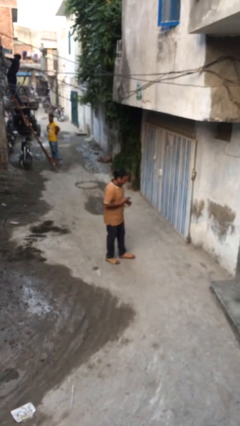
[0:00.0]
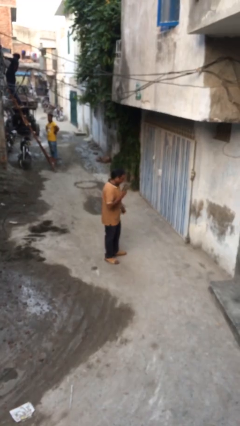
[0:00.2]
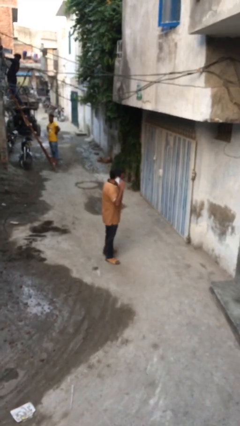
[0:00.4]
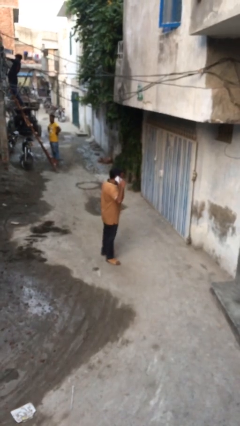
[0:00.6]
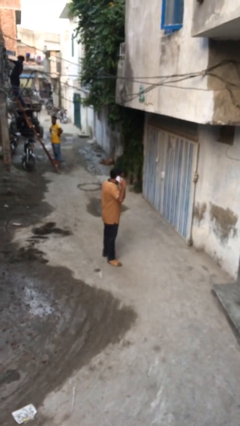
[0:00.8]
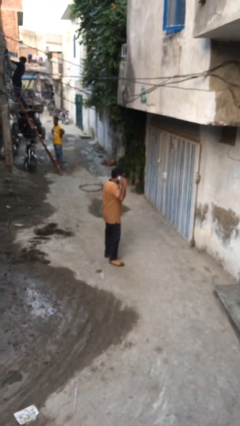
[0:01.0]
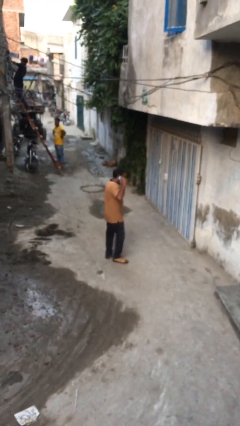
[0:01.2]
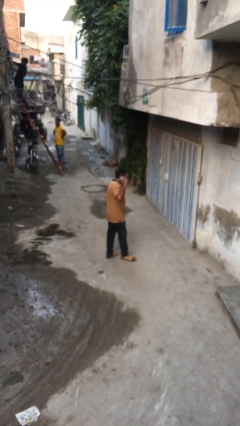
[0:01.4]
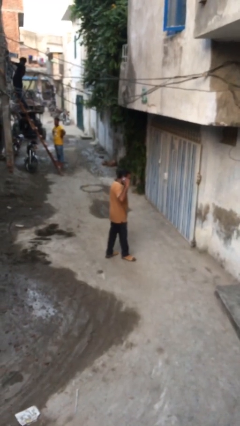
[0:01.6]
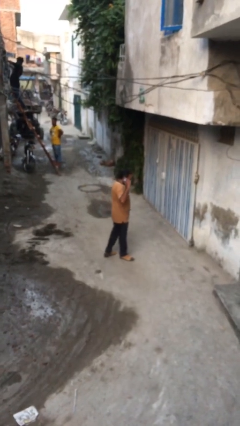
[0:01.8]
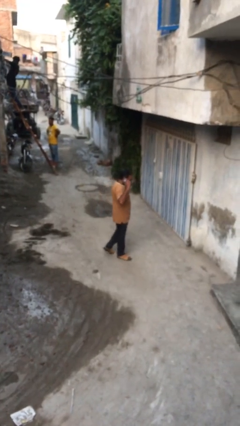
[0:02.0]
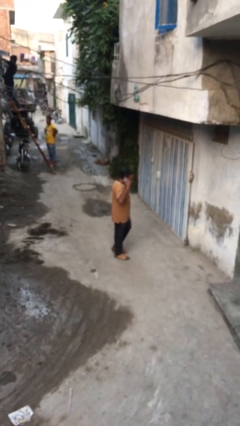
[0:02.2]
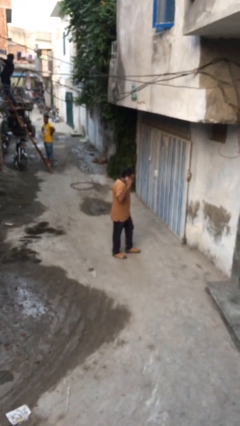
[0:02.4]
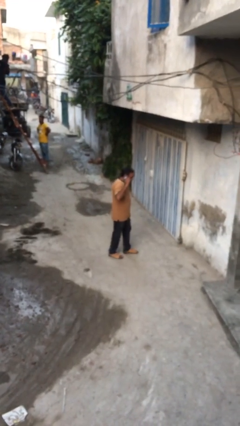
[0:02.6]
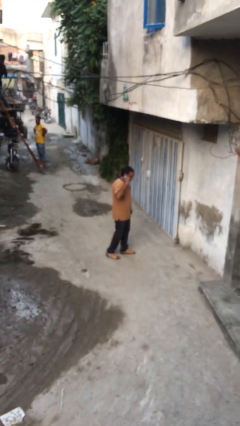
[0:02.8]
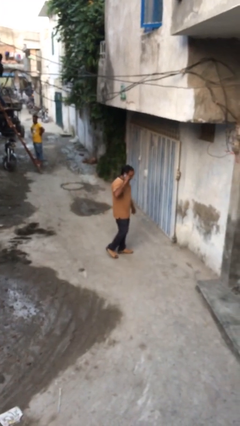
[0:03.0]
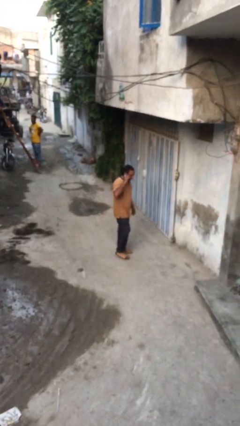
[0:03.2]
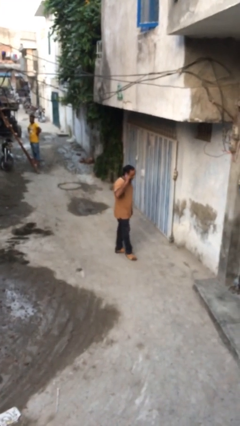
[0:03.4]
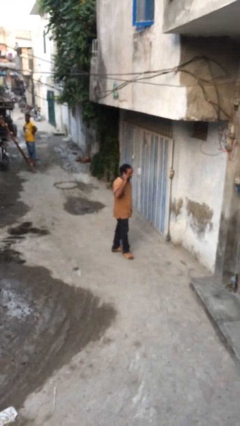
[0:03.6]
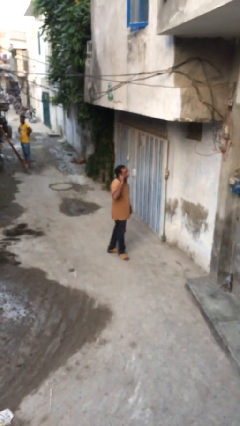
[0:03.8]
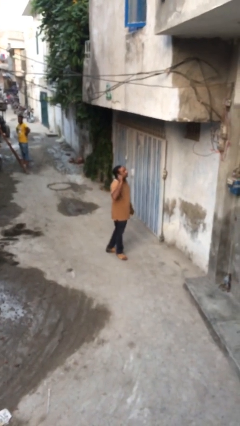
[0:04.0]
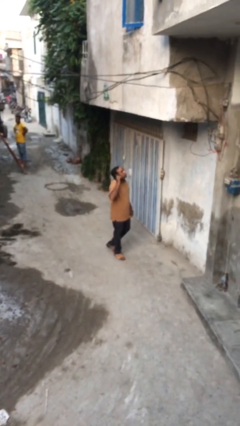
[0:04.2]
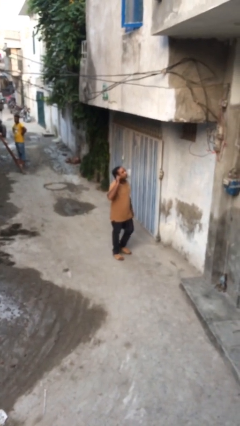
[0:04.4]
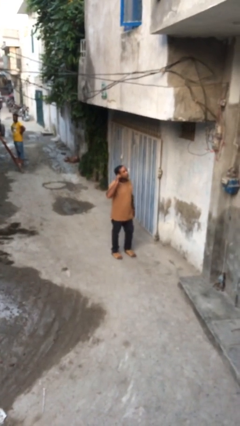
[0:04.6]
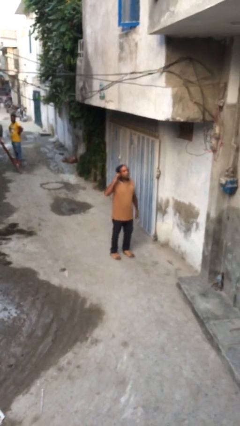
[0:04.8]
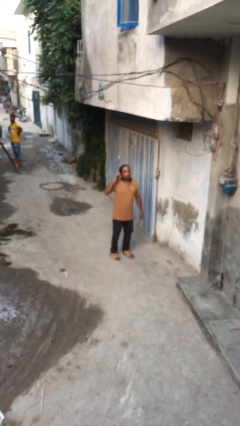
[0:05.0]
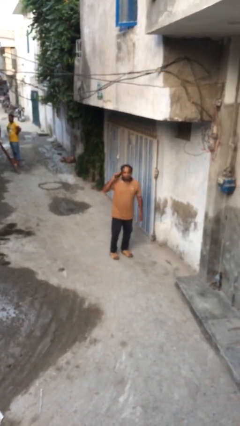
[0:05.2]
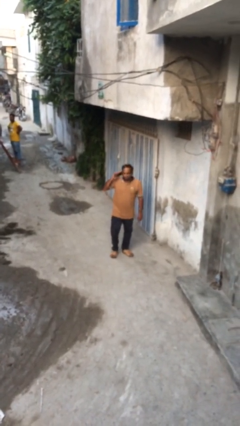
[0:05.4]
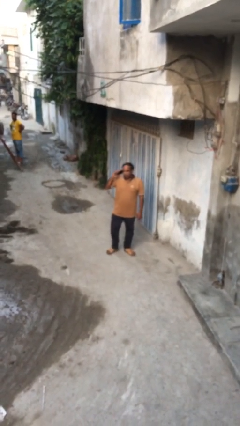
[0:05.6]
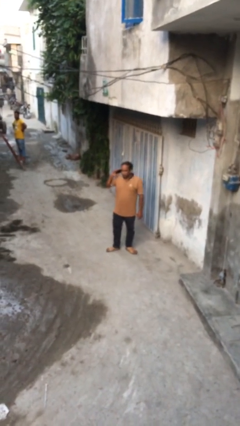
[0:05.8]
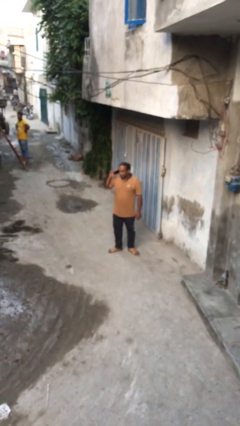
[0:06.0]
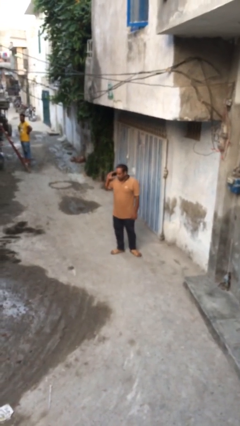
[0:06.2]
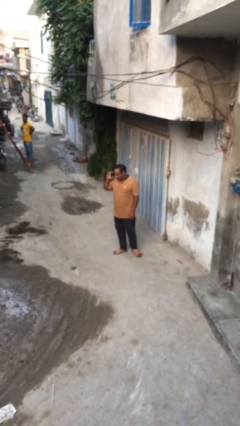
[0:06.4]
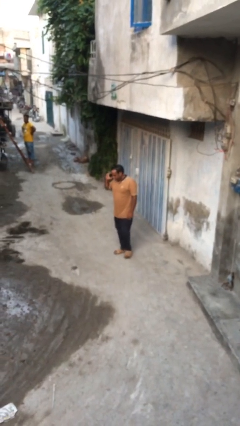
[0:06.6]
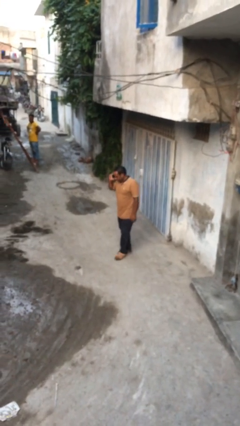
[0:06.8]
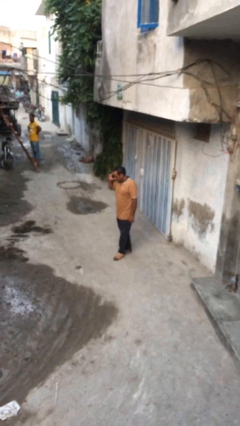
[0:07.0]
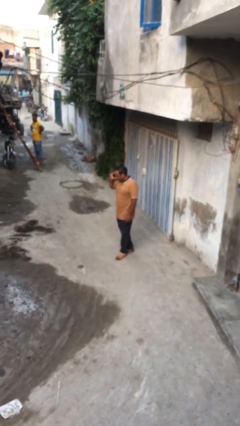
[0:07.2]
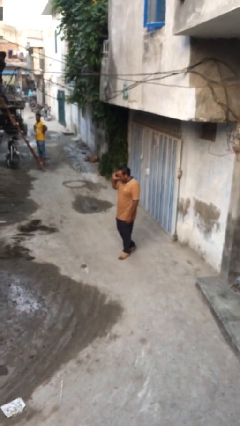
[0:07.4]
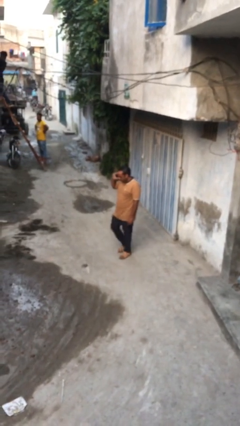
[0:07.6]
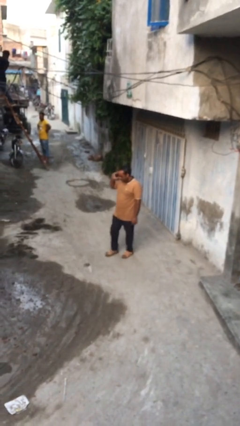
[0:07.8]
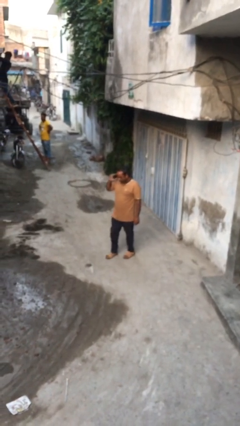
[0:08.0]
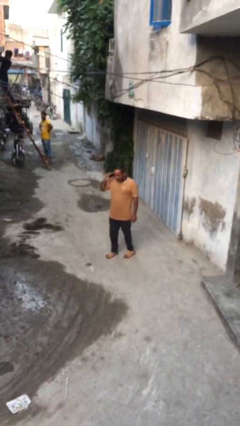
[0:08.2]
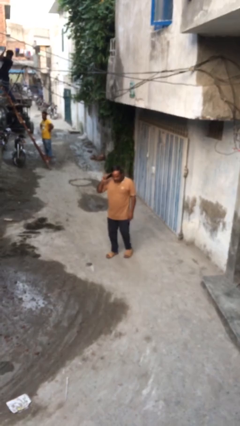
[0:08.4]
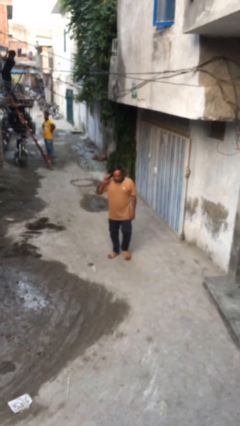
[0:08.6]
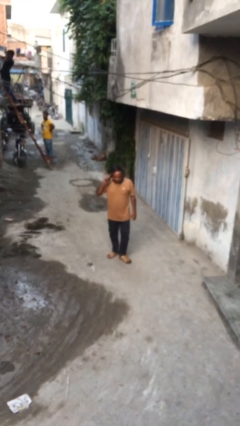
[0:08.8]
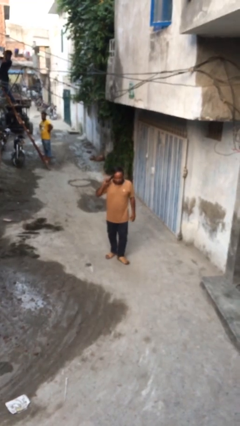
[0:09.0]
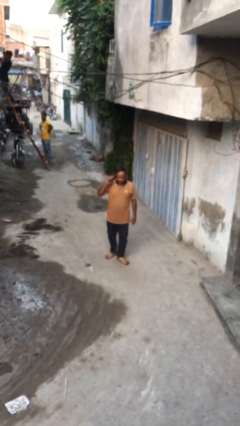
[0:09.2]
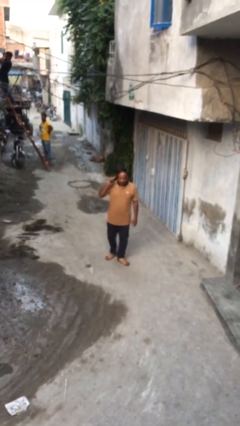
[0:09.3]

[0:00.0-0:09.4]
person talks on phone

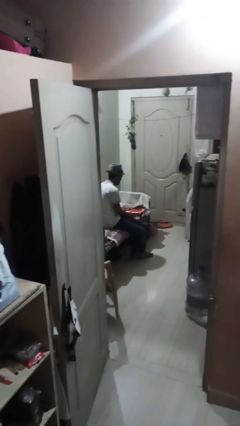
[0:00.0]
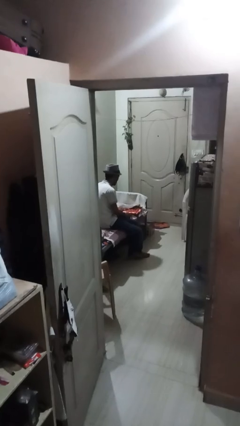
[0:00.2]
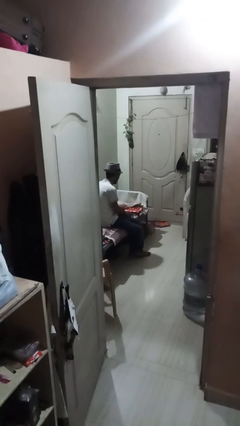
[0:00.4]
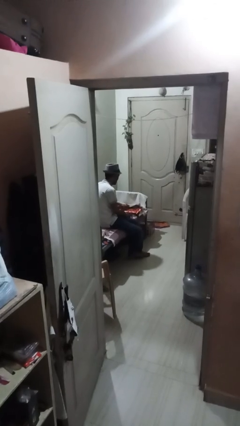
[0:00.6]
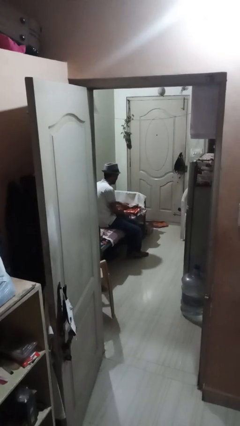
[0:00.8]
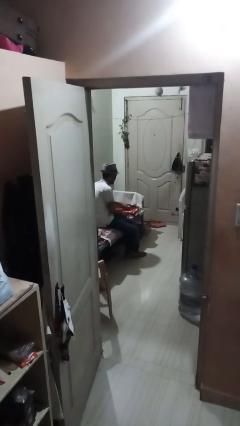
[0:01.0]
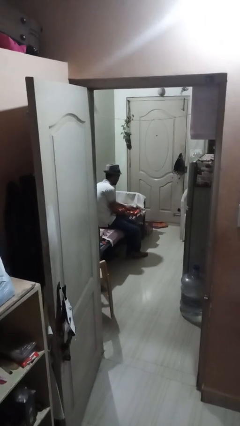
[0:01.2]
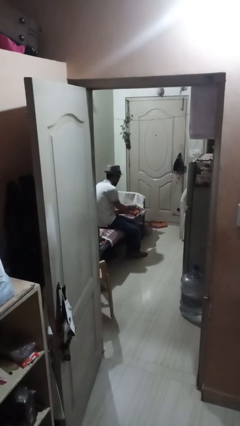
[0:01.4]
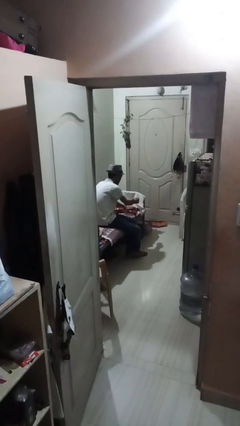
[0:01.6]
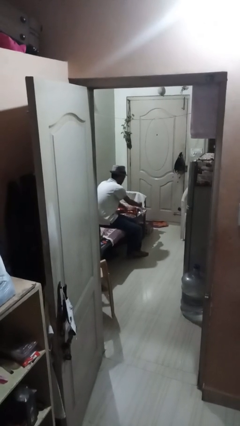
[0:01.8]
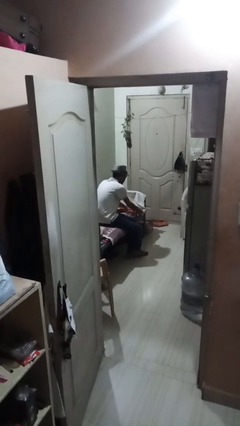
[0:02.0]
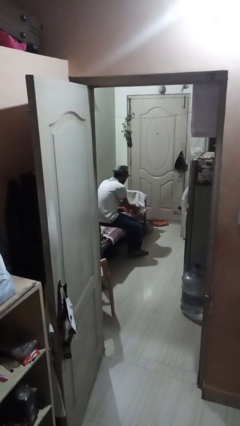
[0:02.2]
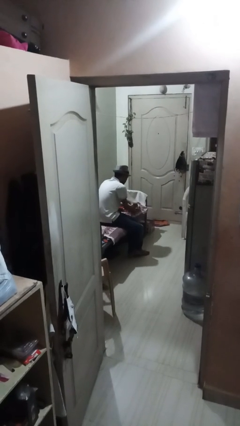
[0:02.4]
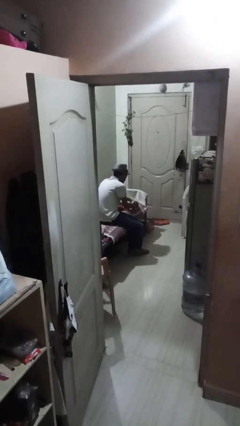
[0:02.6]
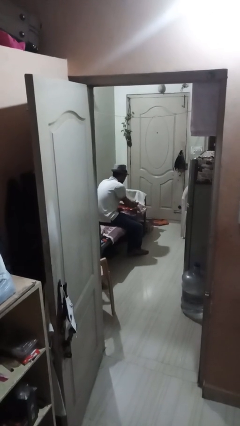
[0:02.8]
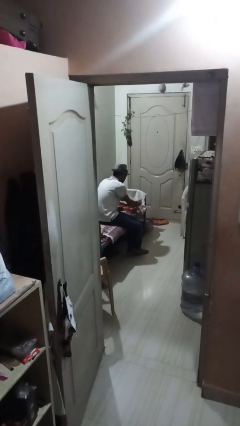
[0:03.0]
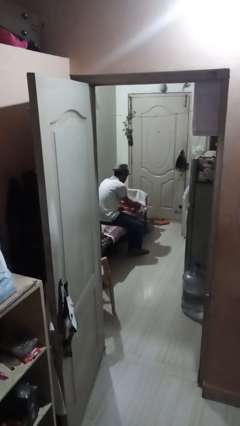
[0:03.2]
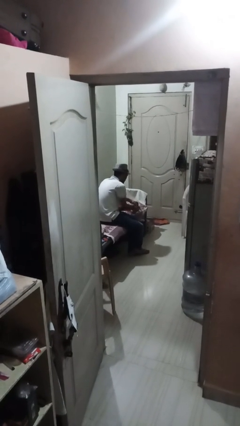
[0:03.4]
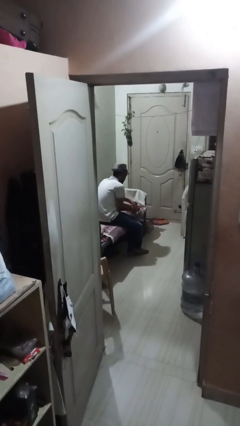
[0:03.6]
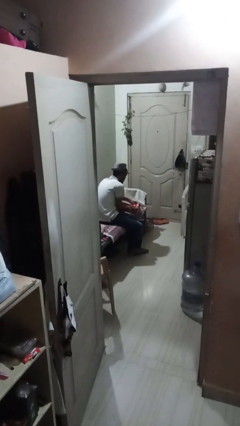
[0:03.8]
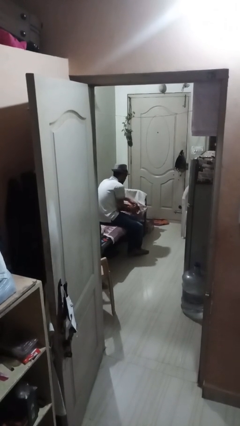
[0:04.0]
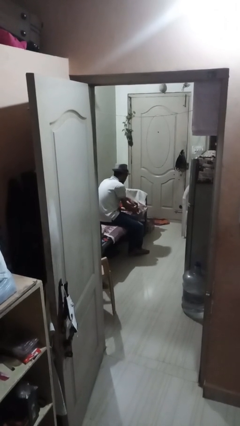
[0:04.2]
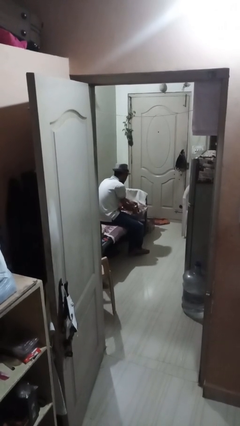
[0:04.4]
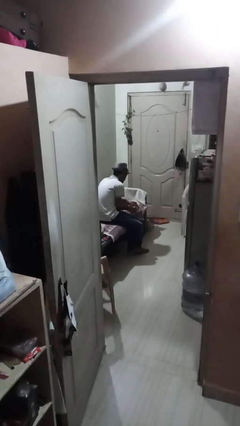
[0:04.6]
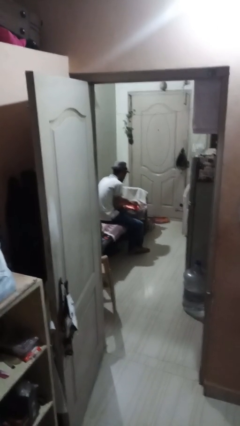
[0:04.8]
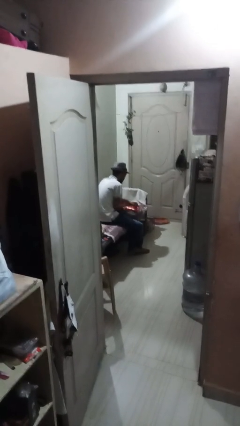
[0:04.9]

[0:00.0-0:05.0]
person wraps box

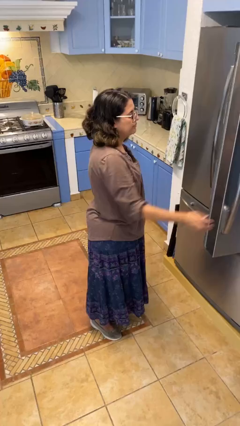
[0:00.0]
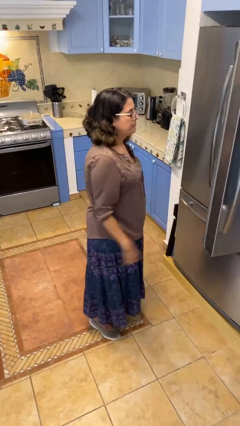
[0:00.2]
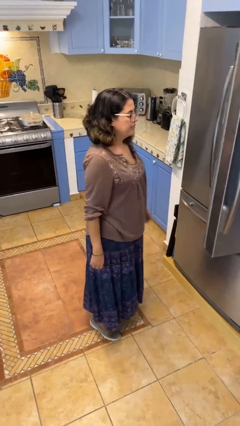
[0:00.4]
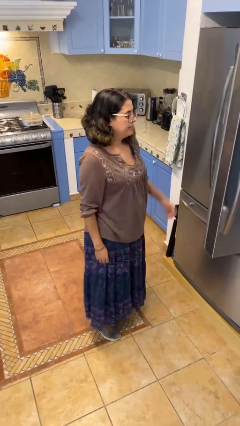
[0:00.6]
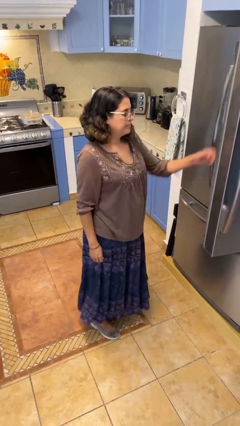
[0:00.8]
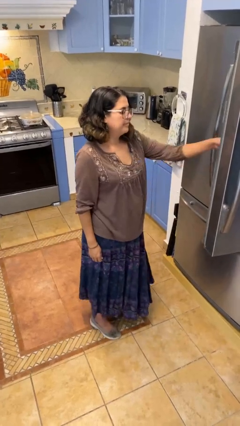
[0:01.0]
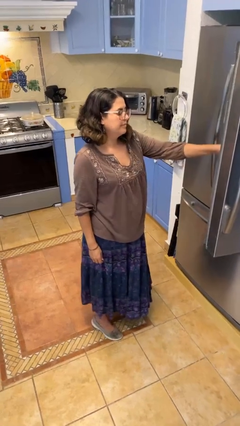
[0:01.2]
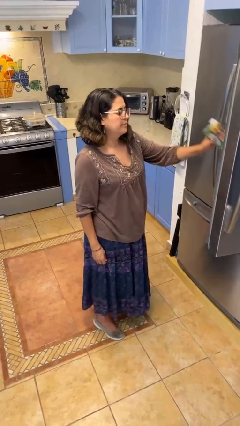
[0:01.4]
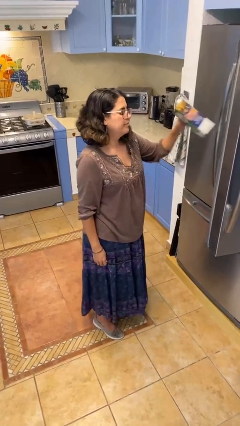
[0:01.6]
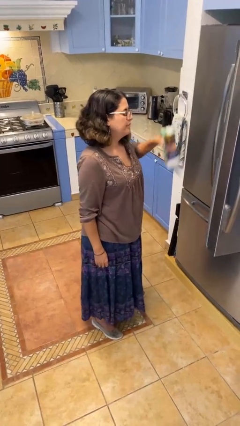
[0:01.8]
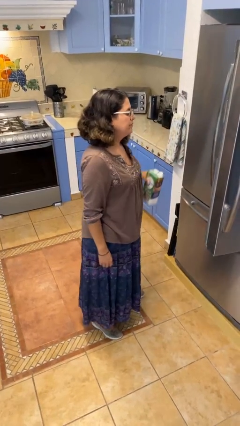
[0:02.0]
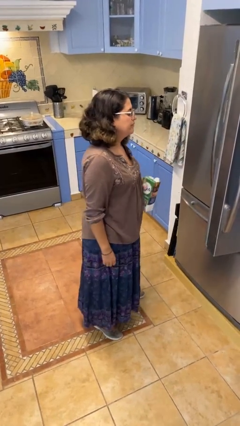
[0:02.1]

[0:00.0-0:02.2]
person takes object from refrigerator

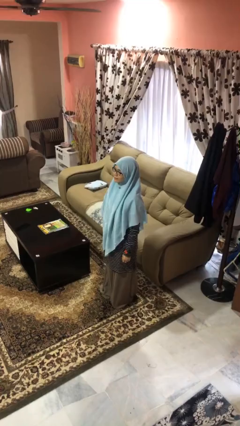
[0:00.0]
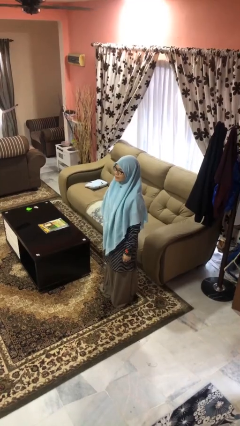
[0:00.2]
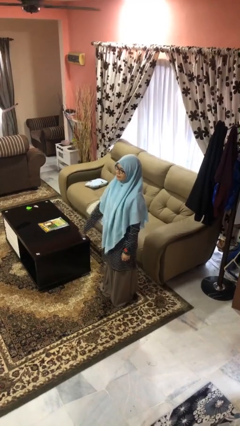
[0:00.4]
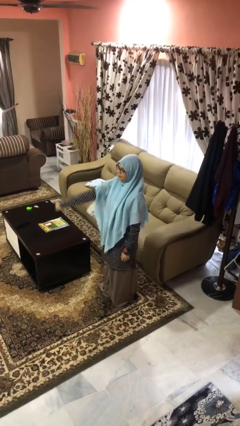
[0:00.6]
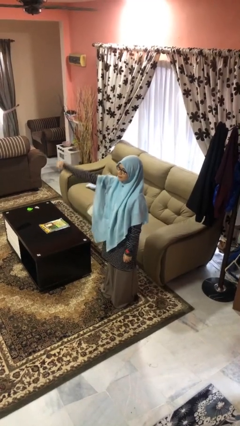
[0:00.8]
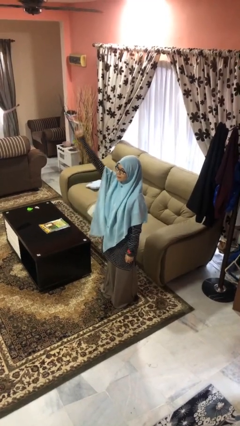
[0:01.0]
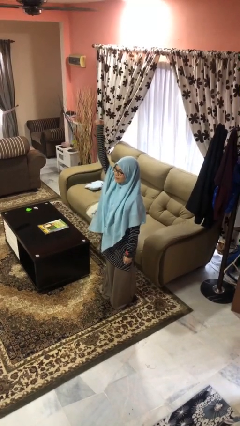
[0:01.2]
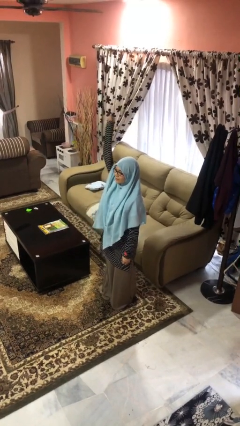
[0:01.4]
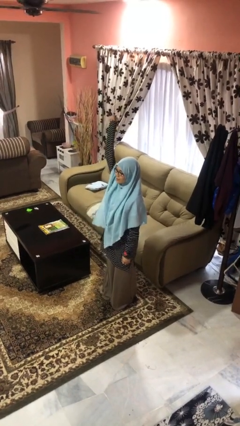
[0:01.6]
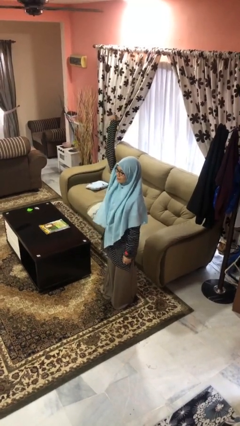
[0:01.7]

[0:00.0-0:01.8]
person gestures raise hand
